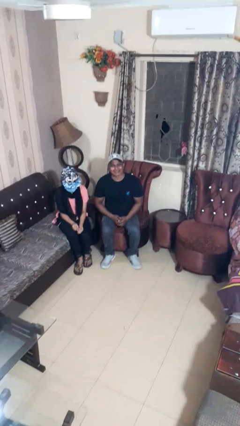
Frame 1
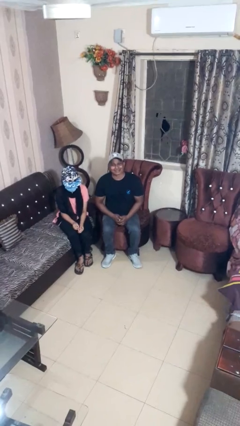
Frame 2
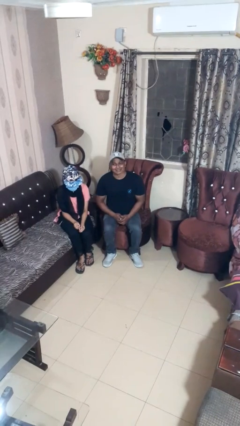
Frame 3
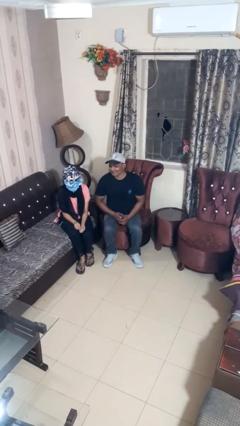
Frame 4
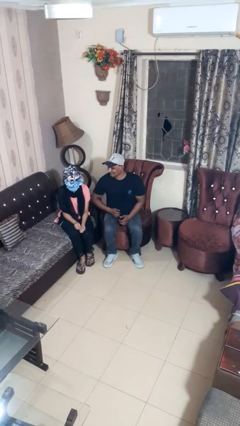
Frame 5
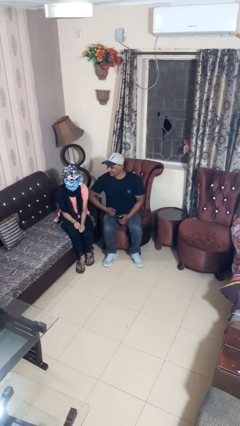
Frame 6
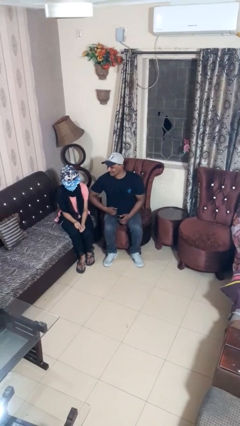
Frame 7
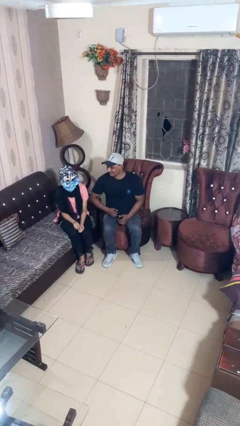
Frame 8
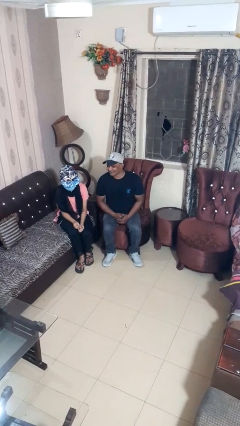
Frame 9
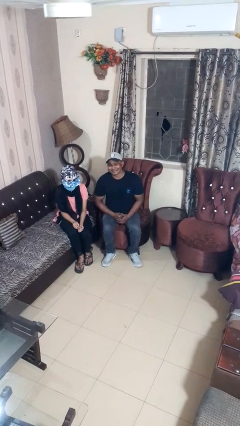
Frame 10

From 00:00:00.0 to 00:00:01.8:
person nudges person with elbow

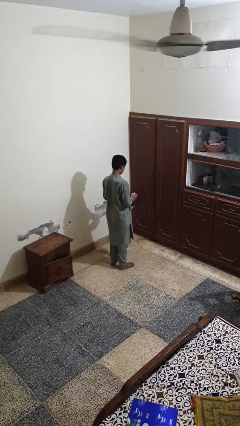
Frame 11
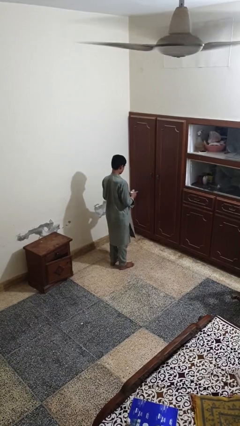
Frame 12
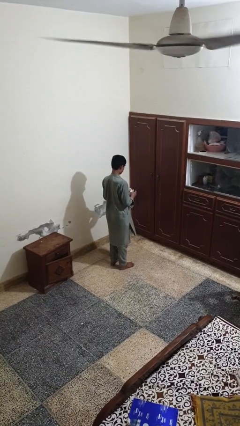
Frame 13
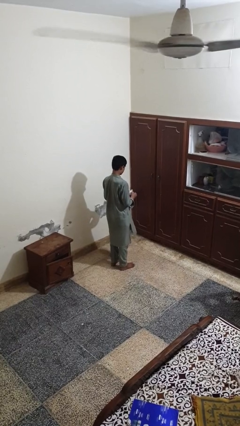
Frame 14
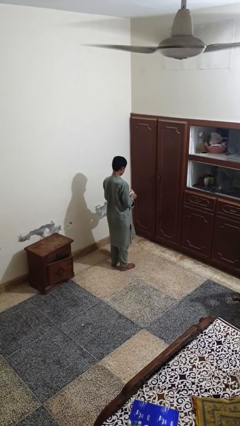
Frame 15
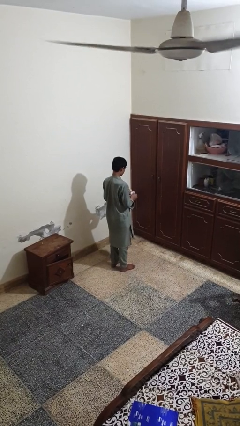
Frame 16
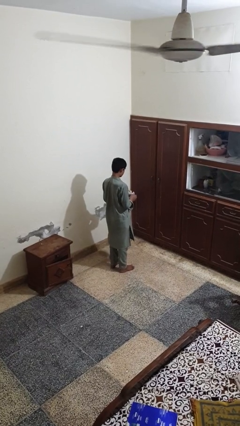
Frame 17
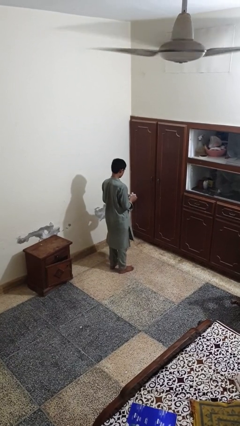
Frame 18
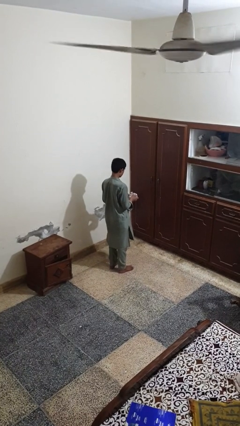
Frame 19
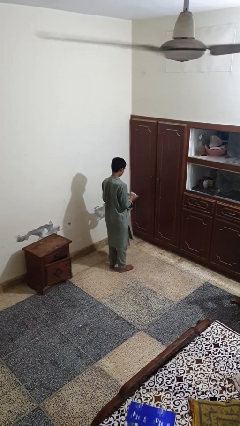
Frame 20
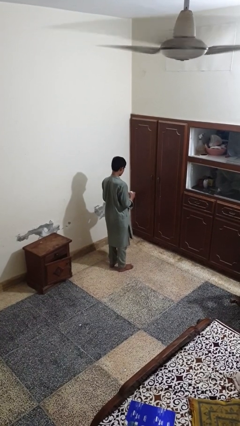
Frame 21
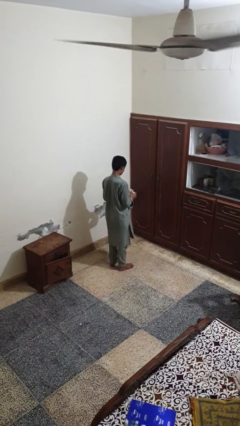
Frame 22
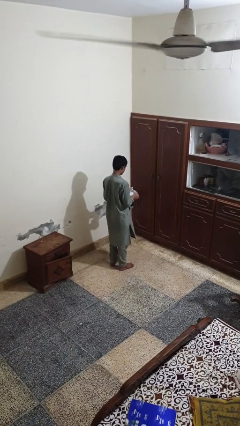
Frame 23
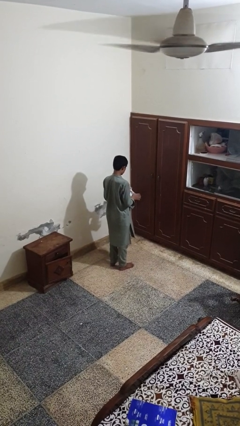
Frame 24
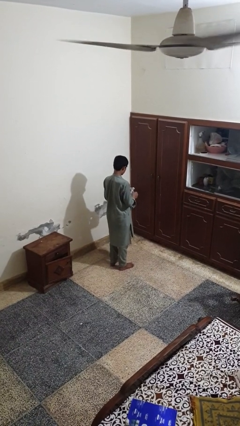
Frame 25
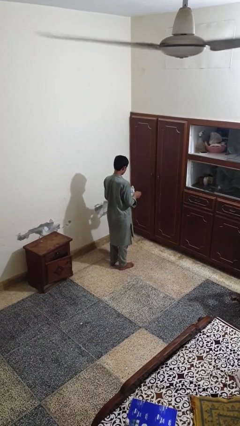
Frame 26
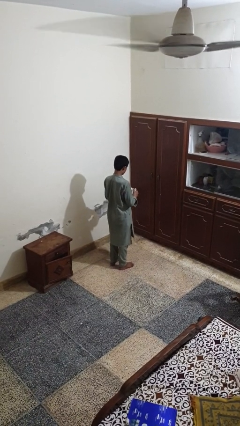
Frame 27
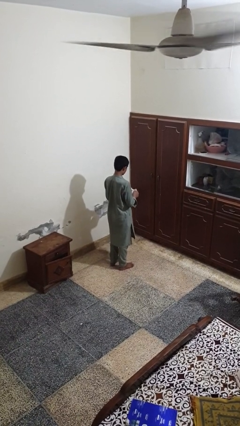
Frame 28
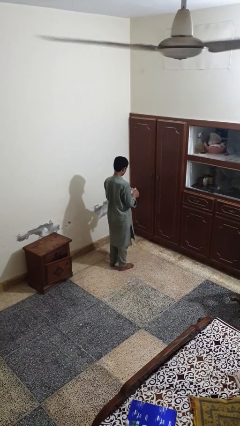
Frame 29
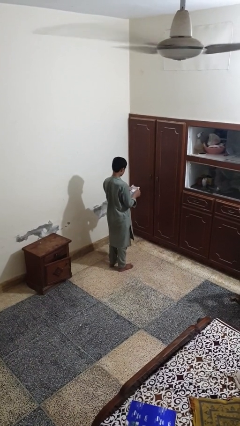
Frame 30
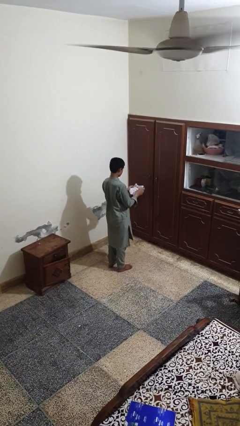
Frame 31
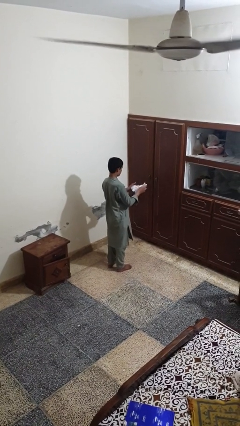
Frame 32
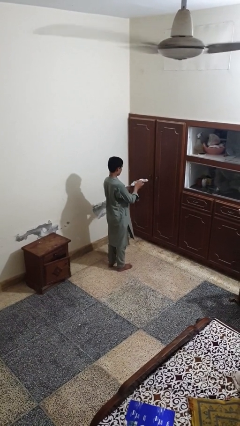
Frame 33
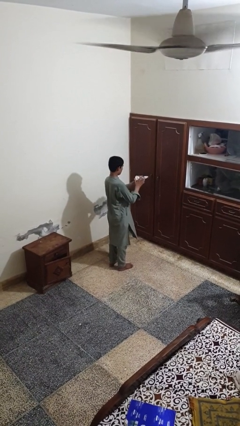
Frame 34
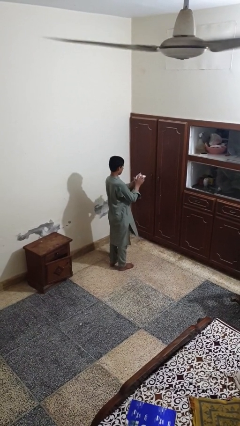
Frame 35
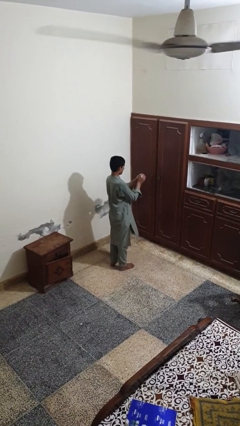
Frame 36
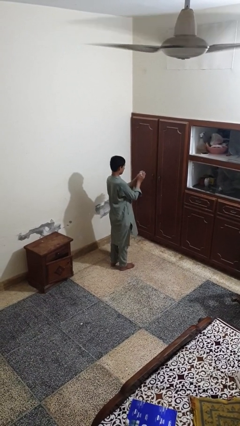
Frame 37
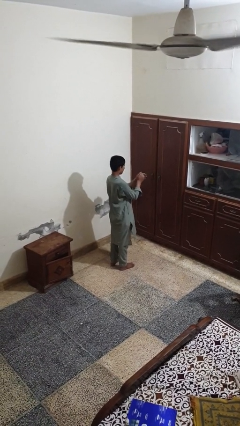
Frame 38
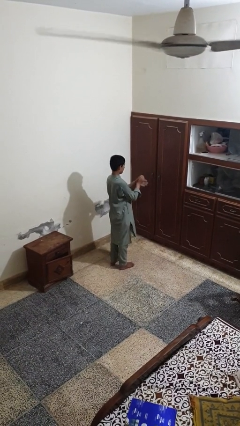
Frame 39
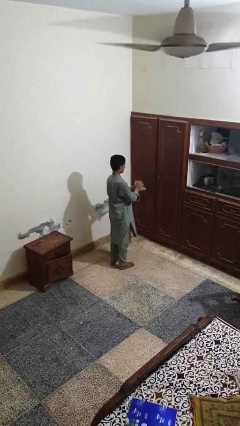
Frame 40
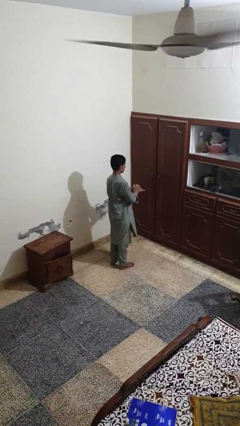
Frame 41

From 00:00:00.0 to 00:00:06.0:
person crumples paper

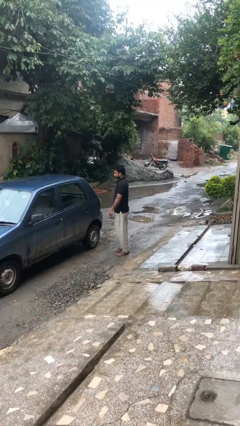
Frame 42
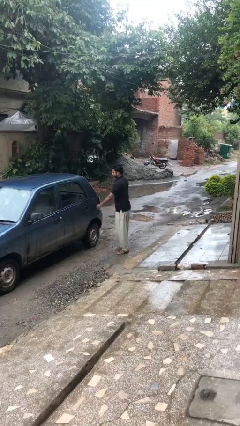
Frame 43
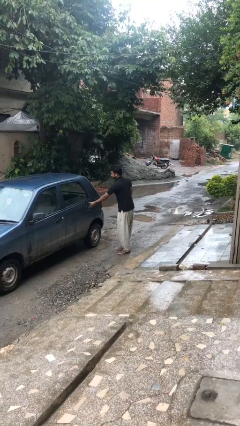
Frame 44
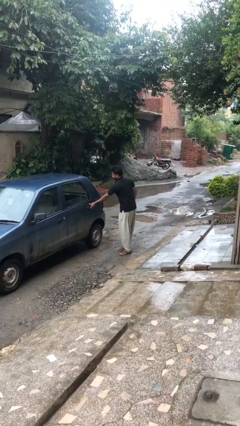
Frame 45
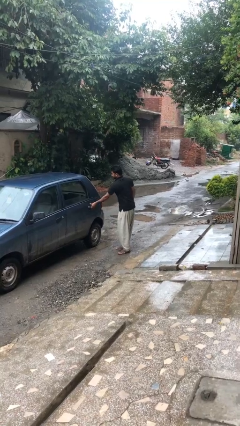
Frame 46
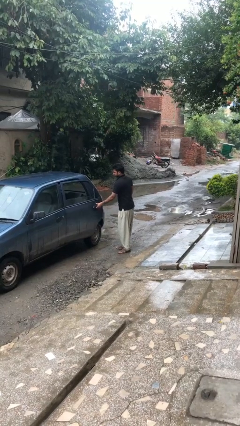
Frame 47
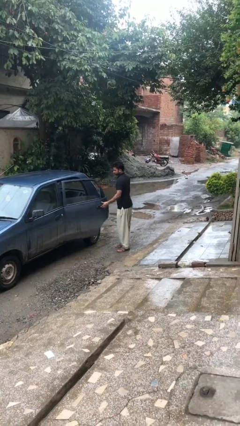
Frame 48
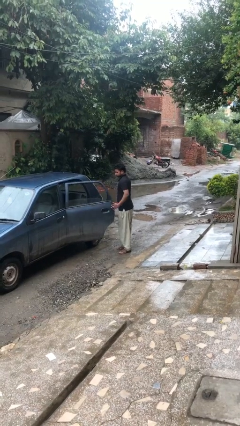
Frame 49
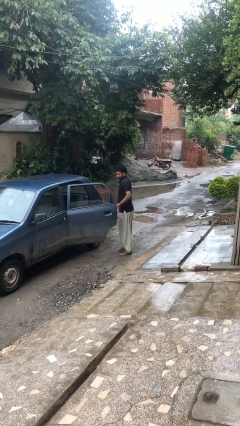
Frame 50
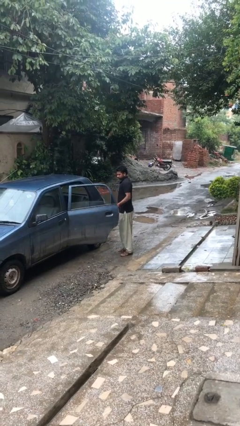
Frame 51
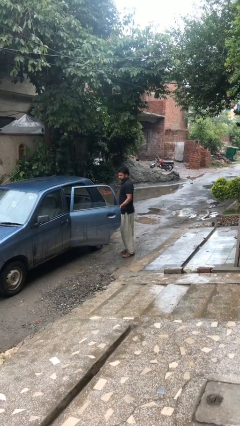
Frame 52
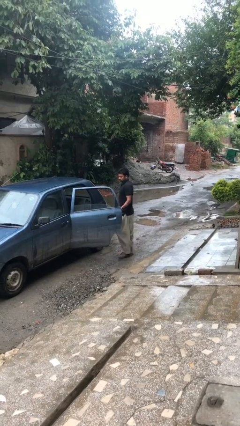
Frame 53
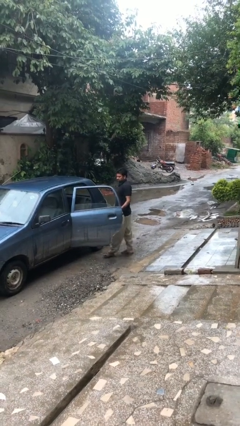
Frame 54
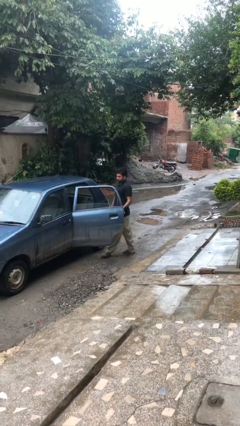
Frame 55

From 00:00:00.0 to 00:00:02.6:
person opens car door

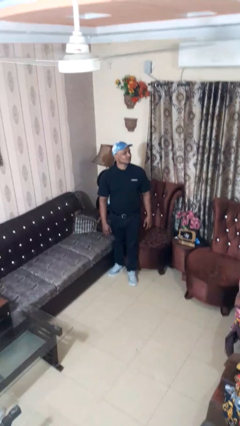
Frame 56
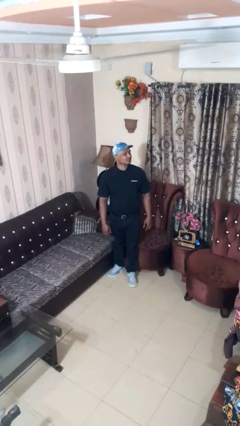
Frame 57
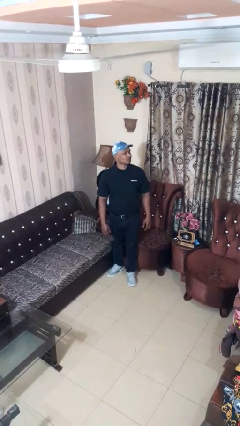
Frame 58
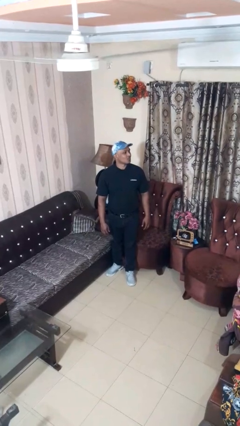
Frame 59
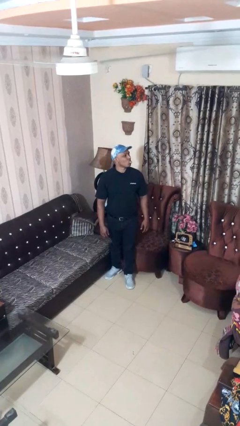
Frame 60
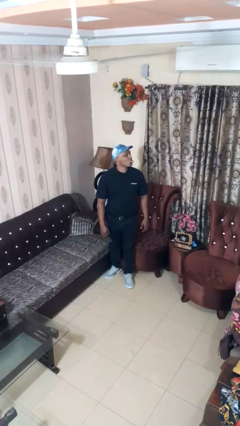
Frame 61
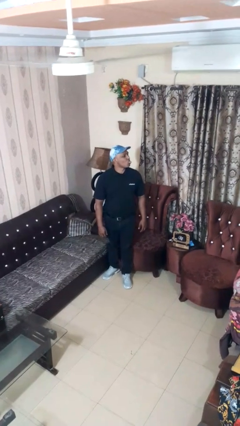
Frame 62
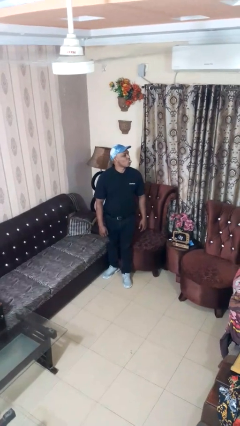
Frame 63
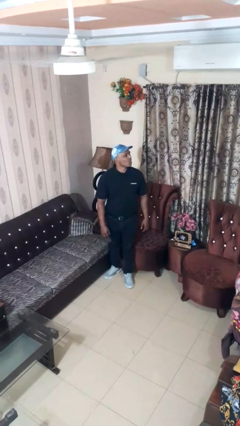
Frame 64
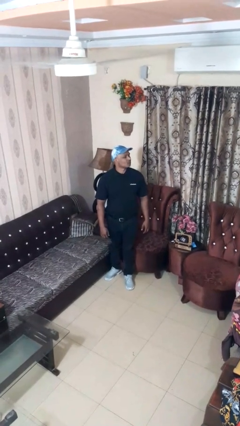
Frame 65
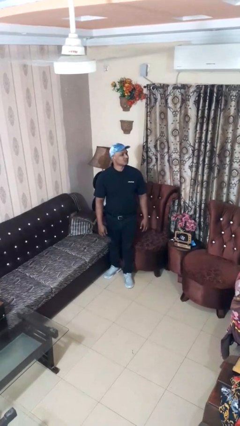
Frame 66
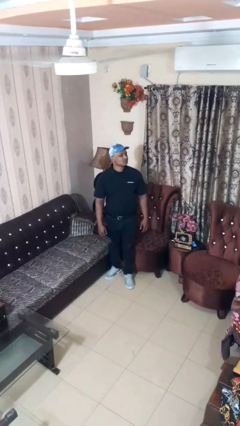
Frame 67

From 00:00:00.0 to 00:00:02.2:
person sticks out tongue

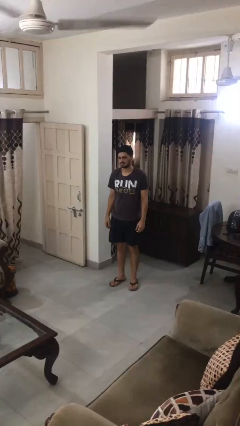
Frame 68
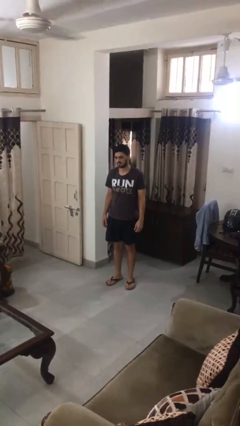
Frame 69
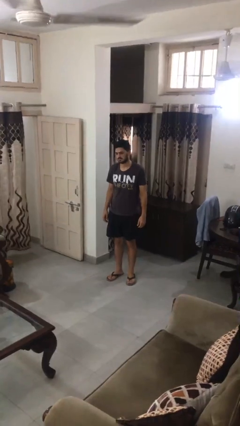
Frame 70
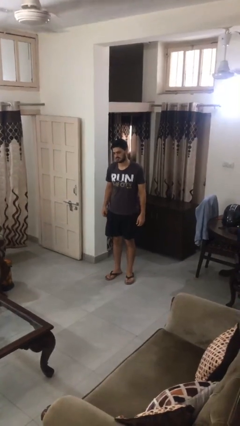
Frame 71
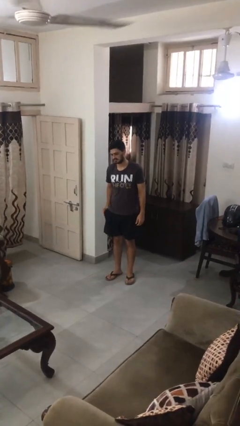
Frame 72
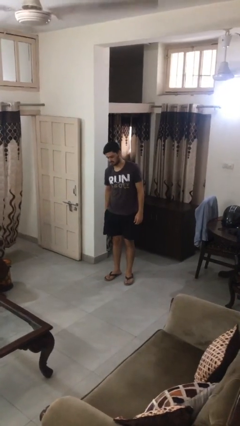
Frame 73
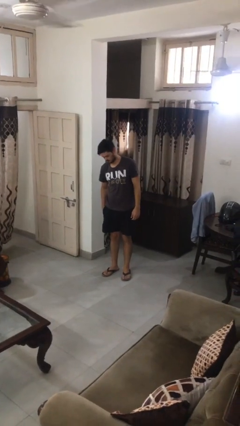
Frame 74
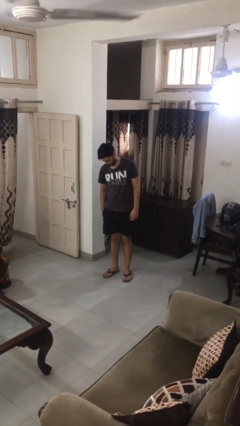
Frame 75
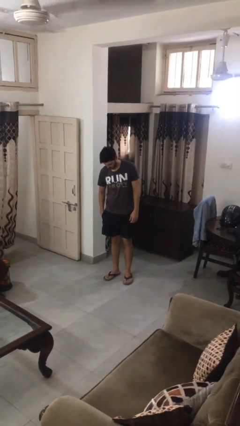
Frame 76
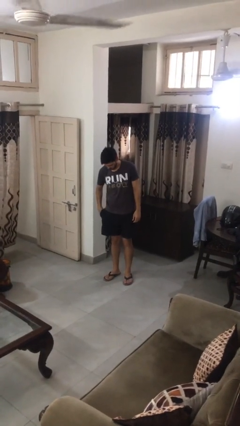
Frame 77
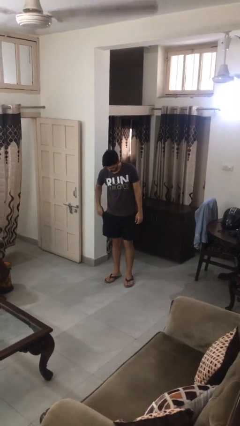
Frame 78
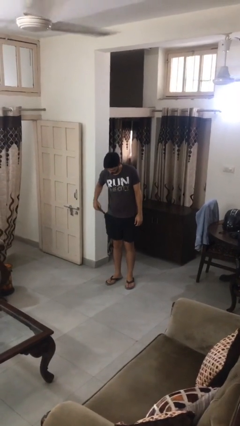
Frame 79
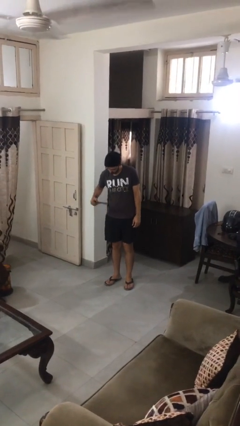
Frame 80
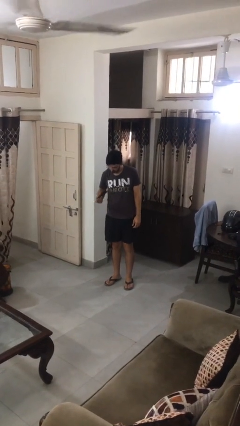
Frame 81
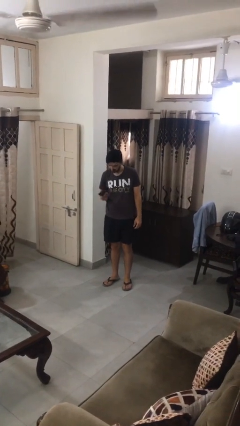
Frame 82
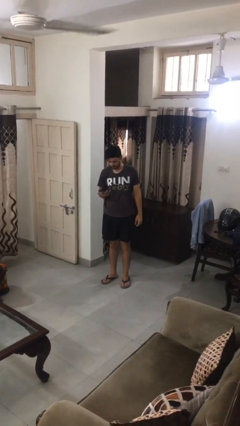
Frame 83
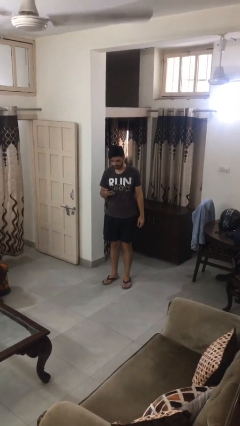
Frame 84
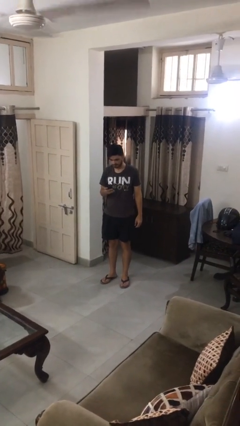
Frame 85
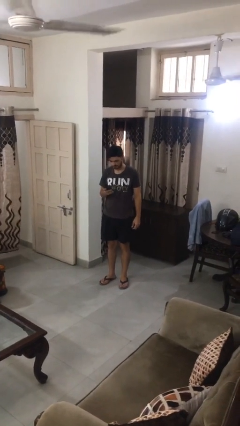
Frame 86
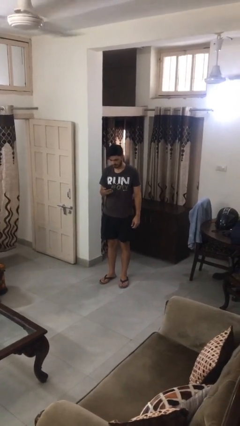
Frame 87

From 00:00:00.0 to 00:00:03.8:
person takes phone from pocket

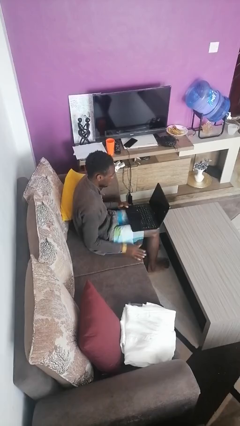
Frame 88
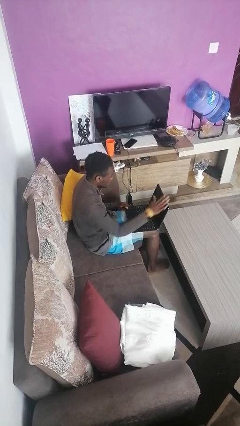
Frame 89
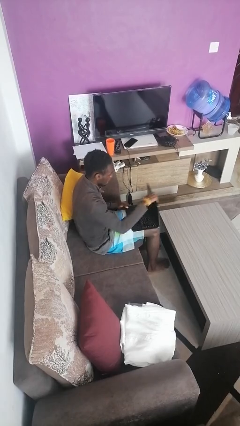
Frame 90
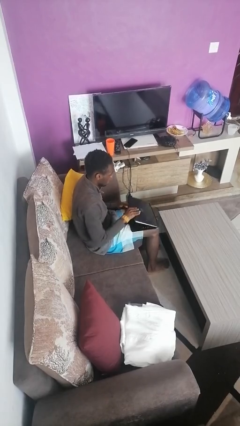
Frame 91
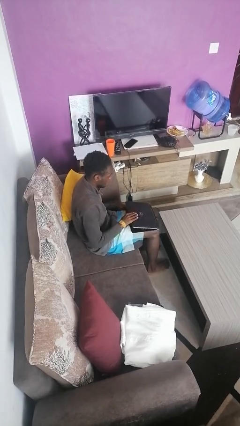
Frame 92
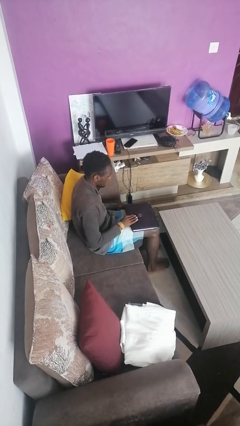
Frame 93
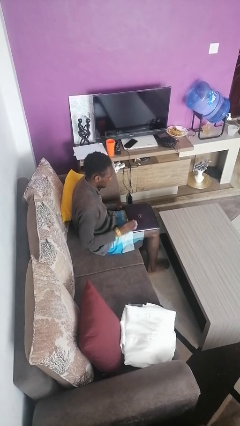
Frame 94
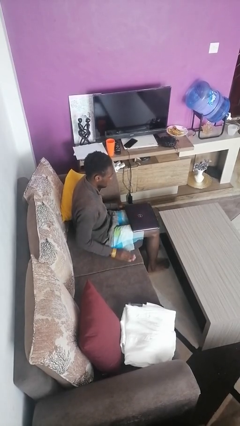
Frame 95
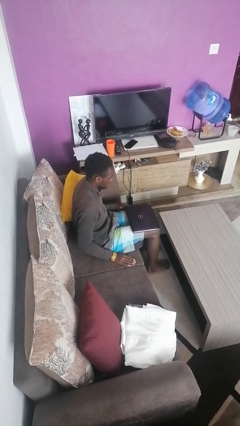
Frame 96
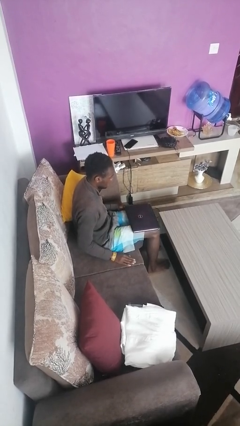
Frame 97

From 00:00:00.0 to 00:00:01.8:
person closes laptop
